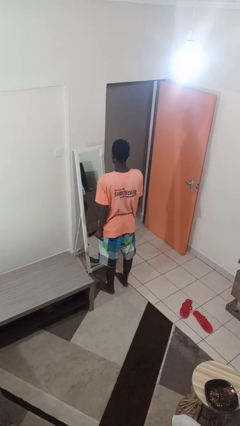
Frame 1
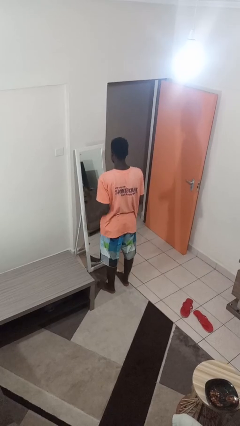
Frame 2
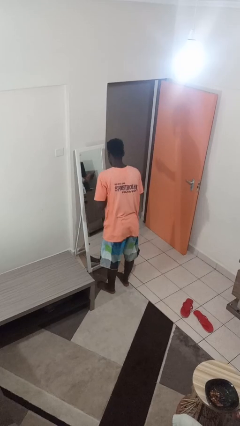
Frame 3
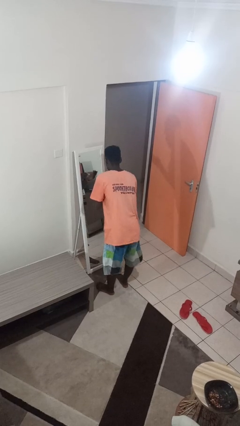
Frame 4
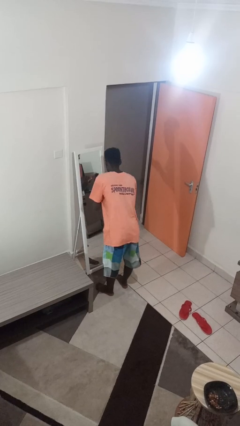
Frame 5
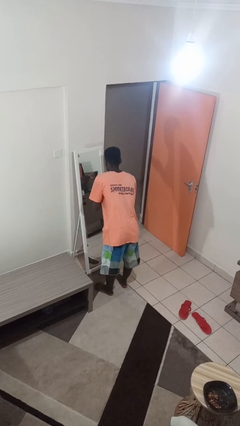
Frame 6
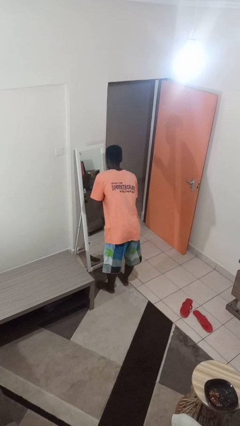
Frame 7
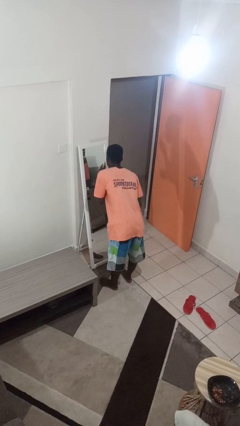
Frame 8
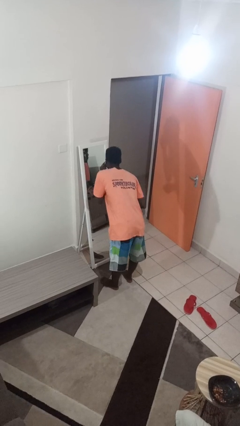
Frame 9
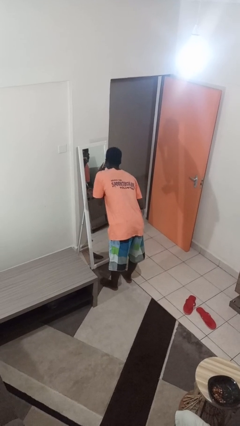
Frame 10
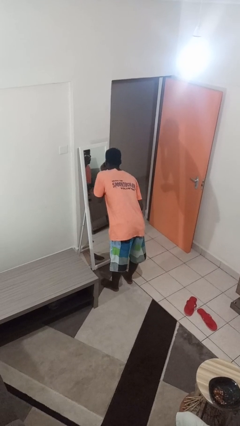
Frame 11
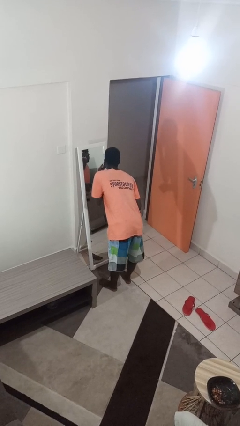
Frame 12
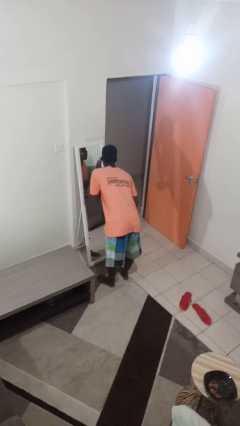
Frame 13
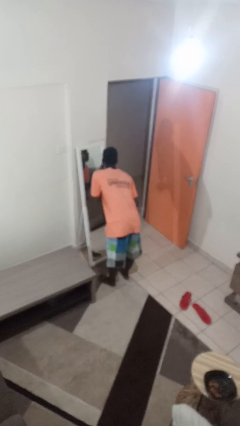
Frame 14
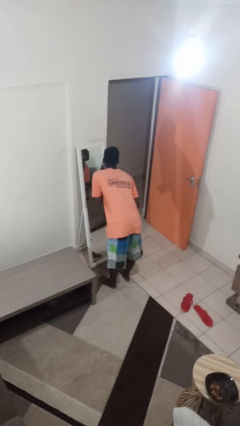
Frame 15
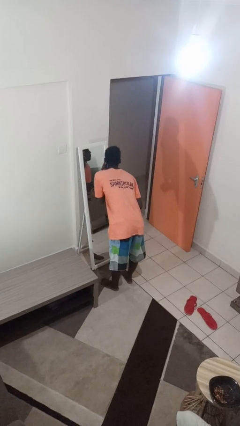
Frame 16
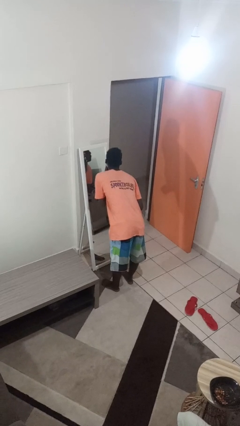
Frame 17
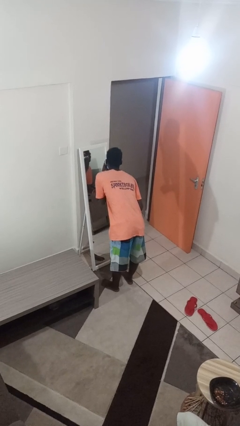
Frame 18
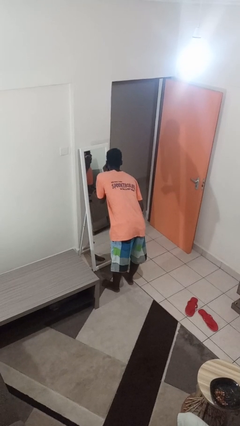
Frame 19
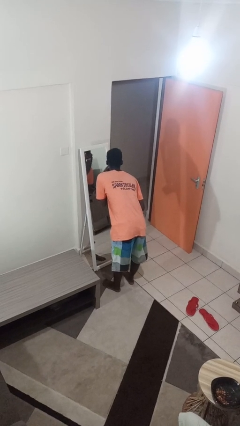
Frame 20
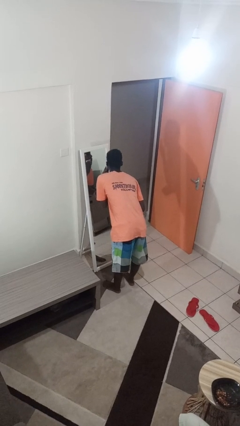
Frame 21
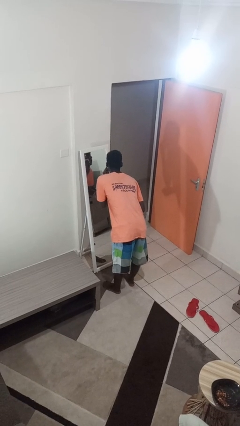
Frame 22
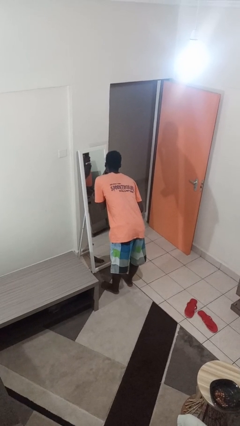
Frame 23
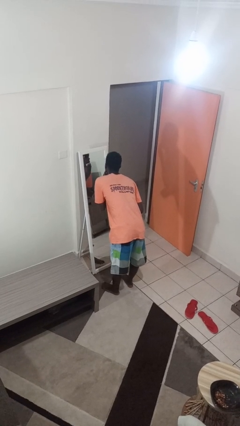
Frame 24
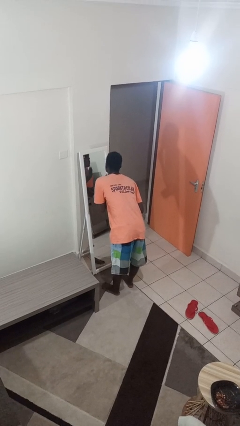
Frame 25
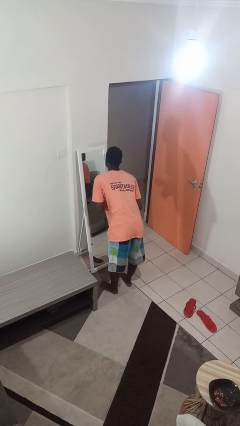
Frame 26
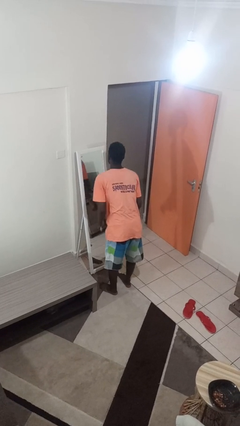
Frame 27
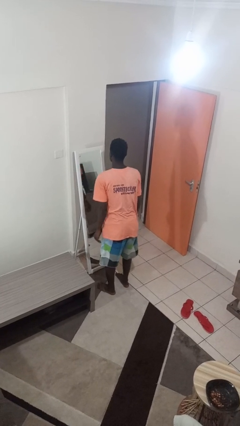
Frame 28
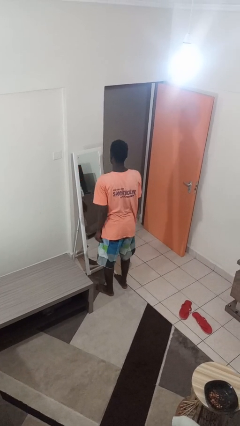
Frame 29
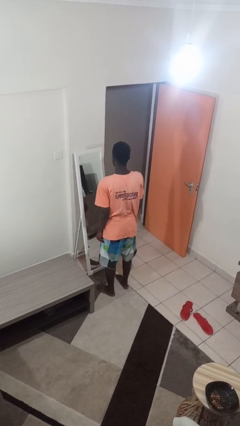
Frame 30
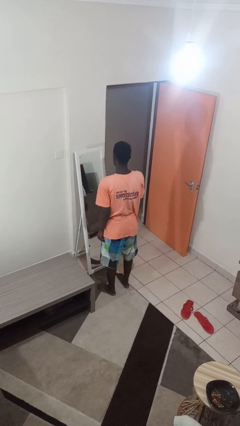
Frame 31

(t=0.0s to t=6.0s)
person applies foundation makeup

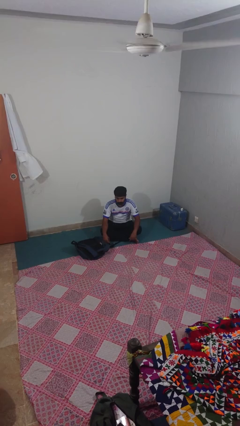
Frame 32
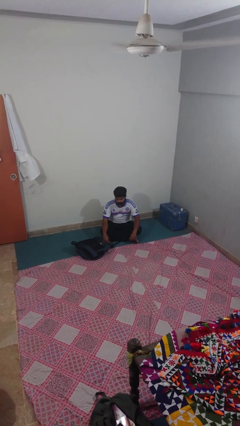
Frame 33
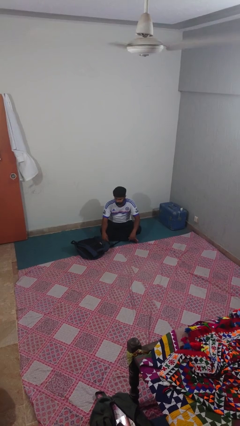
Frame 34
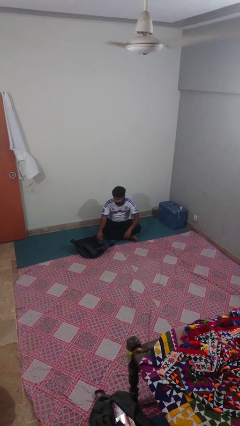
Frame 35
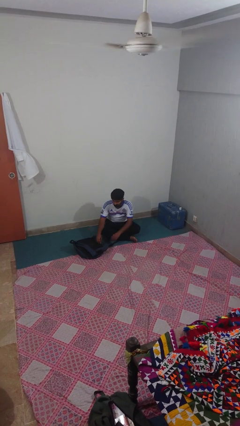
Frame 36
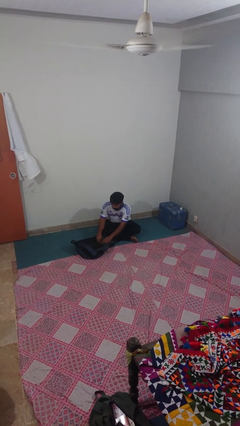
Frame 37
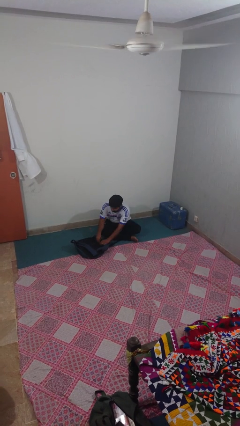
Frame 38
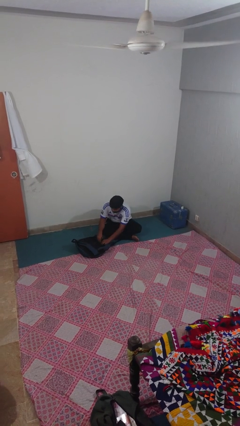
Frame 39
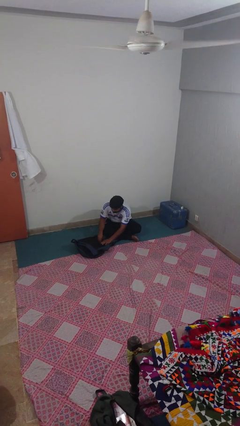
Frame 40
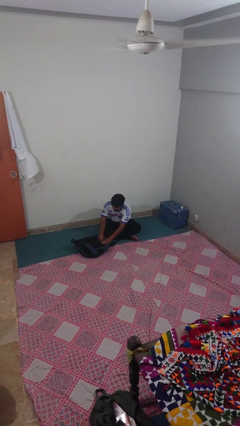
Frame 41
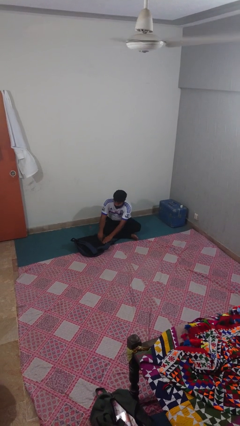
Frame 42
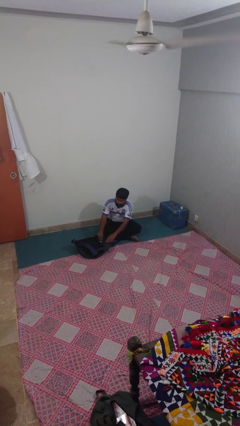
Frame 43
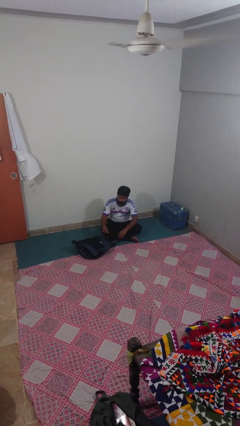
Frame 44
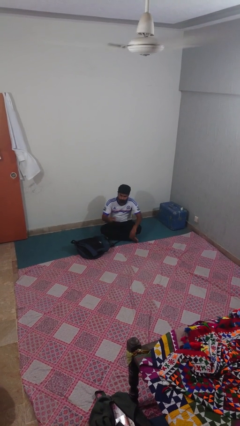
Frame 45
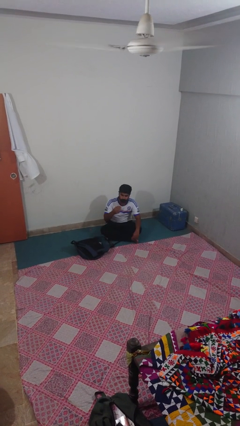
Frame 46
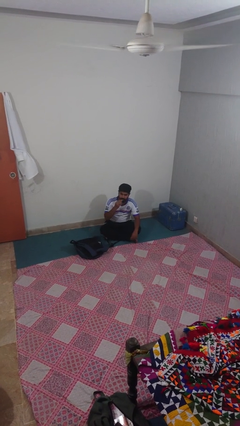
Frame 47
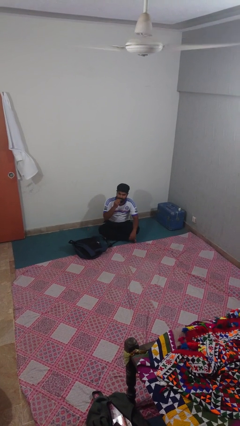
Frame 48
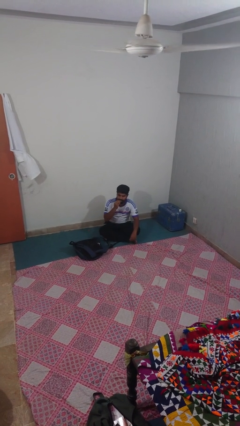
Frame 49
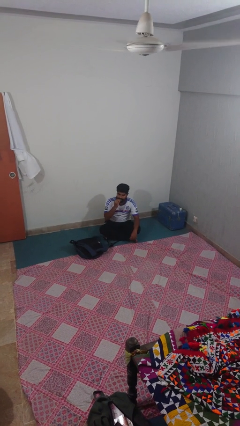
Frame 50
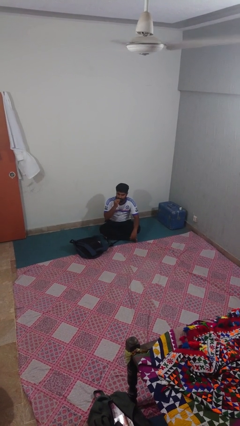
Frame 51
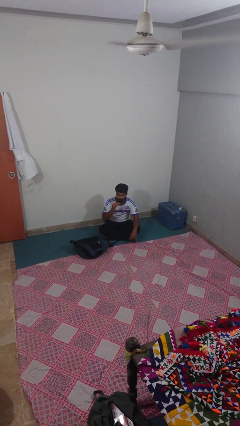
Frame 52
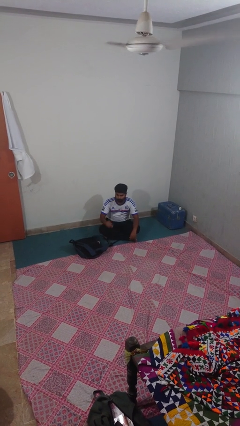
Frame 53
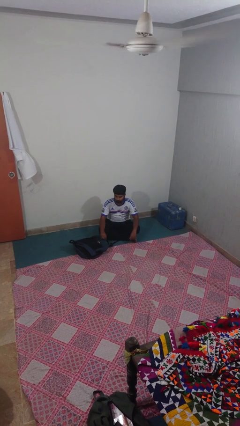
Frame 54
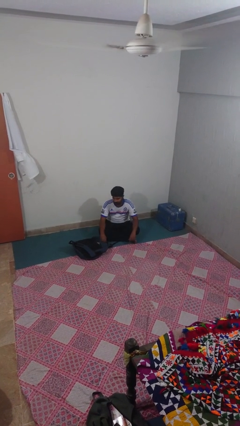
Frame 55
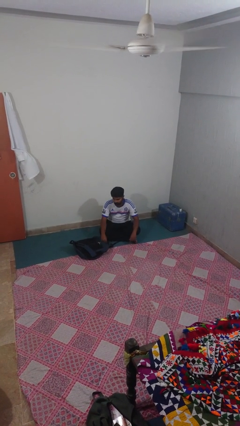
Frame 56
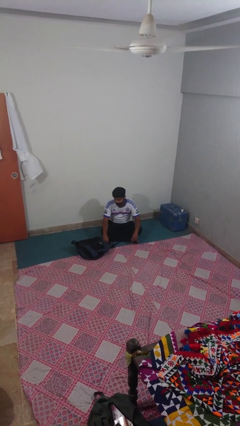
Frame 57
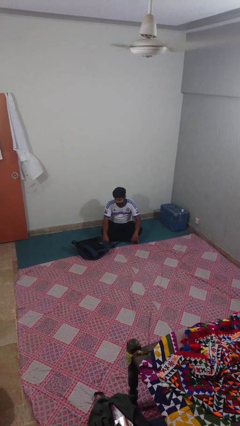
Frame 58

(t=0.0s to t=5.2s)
person eats snack from bag

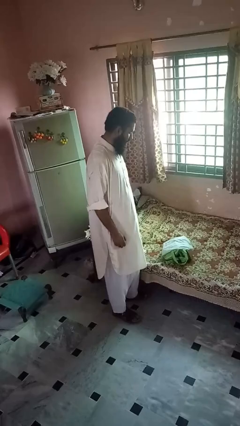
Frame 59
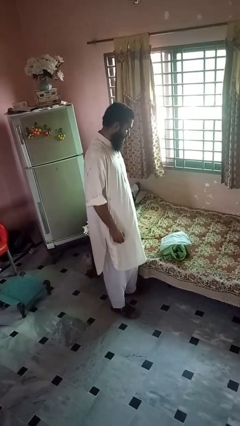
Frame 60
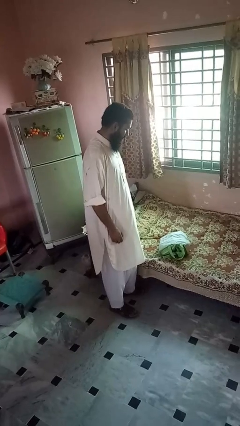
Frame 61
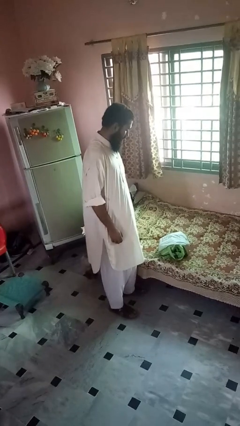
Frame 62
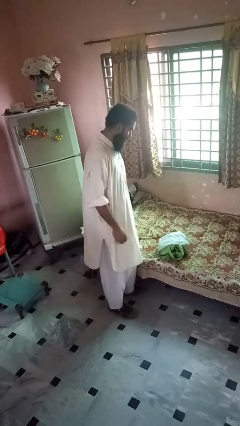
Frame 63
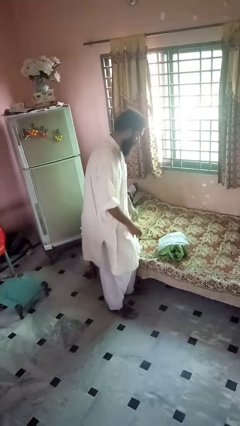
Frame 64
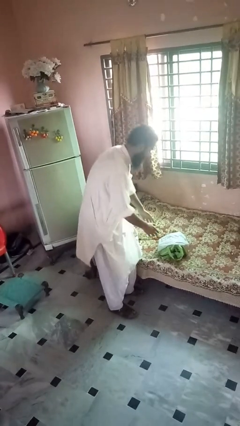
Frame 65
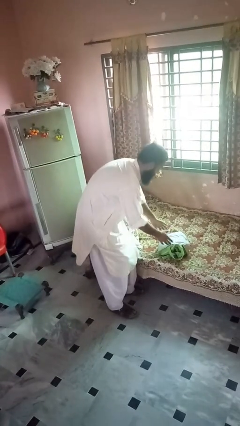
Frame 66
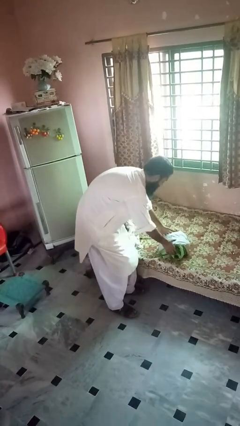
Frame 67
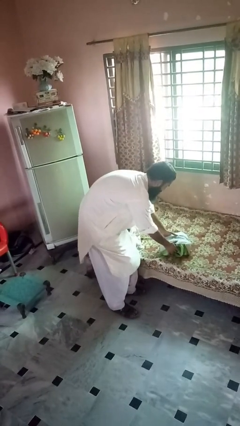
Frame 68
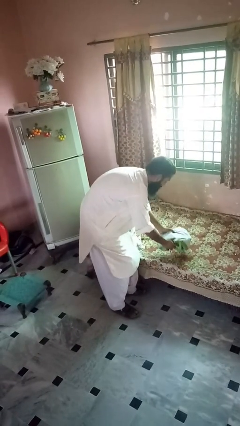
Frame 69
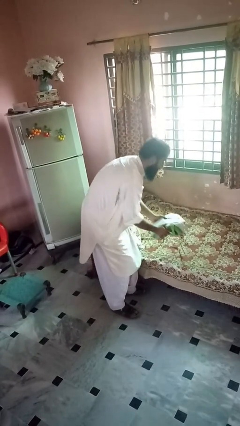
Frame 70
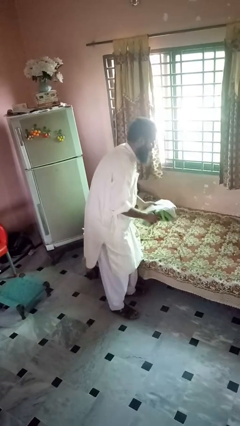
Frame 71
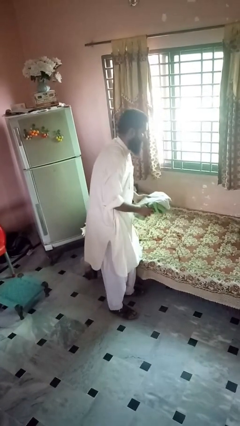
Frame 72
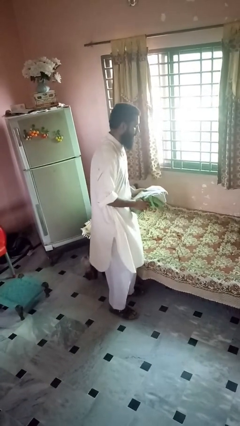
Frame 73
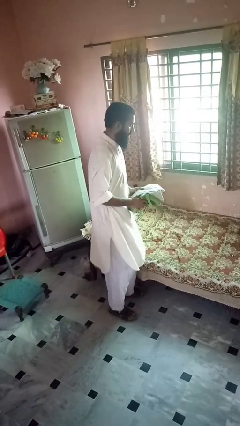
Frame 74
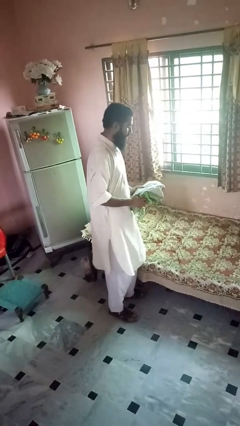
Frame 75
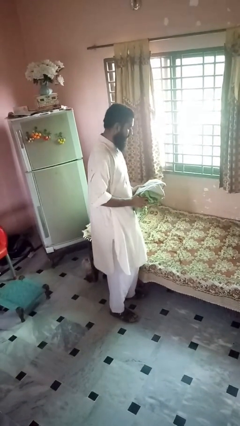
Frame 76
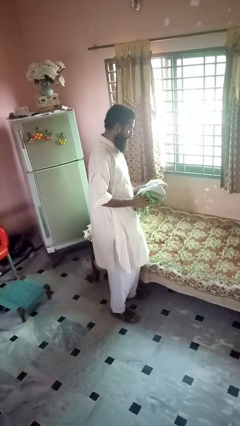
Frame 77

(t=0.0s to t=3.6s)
person picks up object from bed

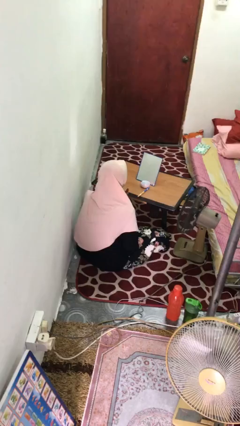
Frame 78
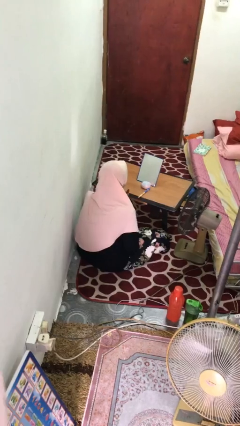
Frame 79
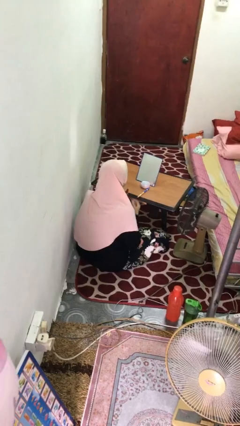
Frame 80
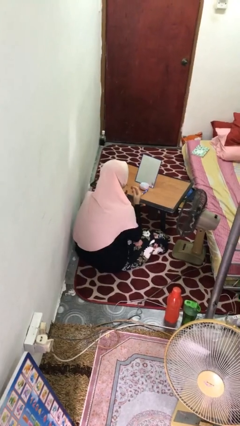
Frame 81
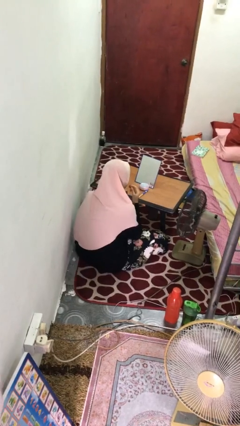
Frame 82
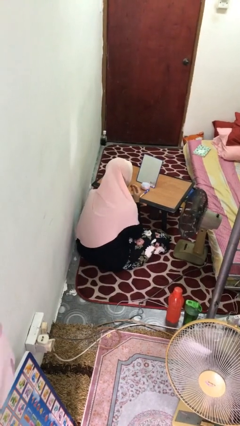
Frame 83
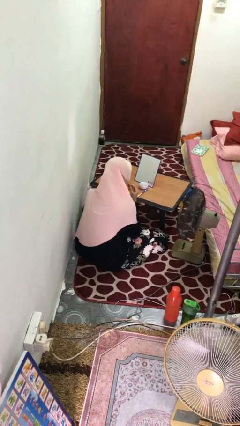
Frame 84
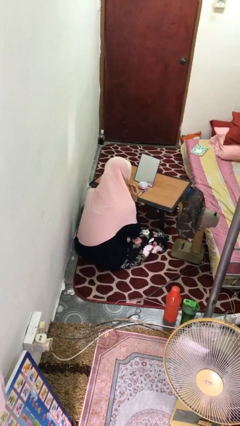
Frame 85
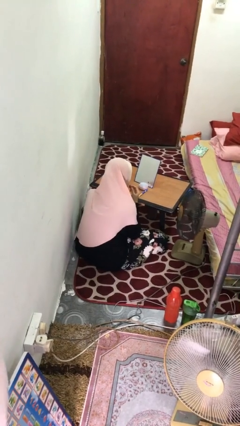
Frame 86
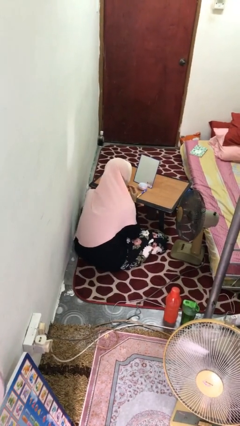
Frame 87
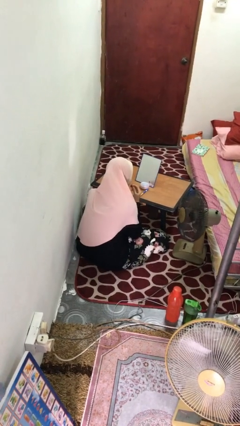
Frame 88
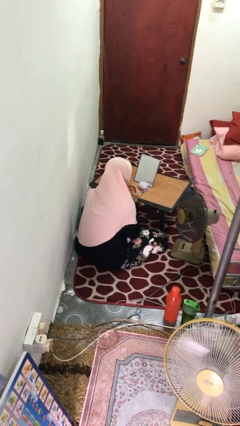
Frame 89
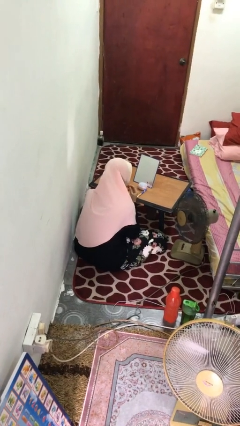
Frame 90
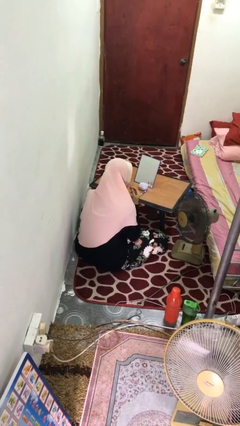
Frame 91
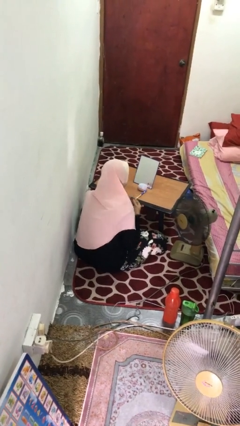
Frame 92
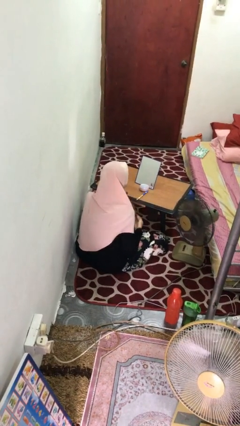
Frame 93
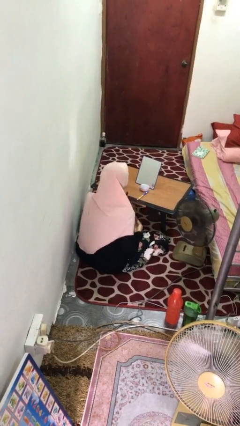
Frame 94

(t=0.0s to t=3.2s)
person applies lip makeup
